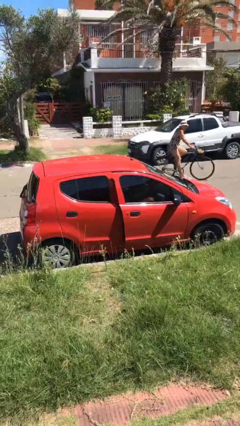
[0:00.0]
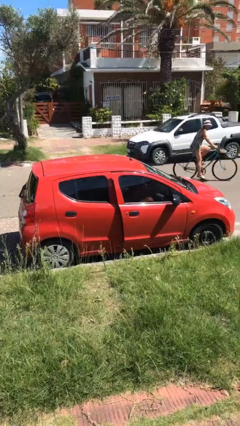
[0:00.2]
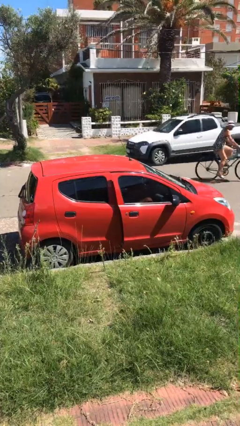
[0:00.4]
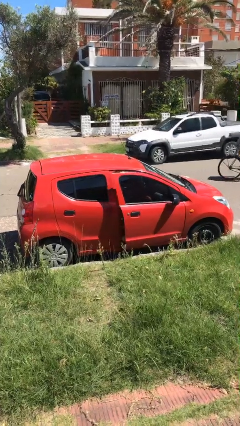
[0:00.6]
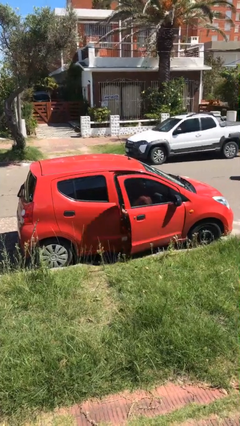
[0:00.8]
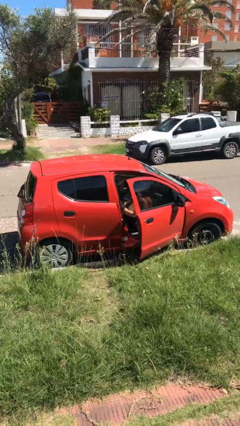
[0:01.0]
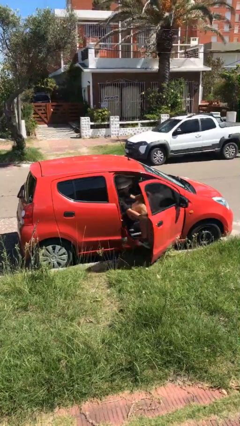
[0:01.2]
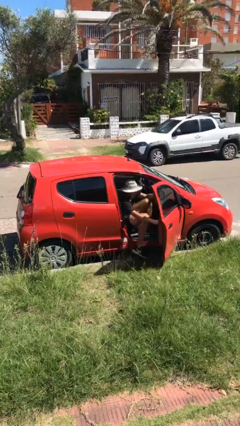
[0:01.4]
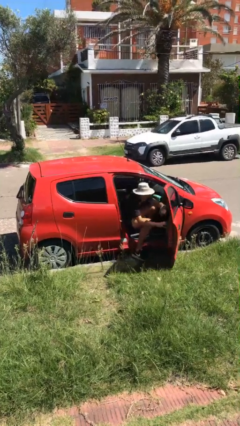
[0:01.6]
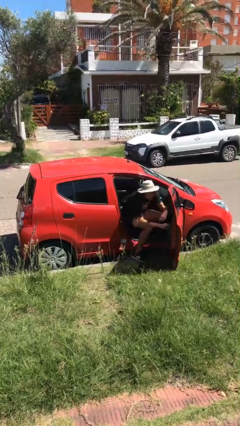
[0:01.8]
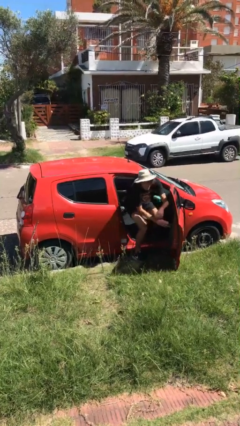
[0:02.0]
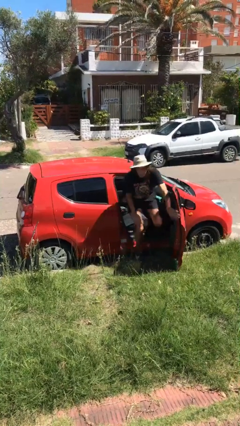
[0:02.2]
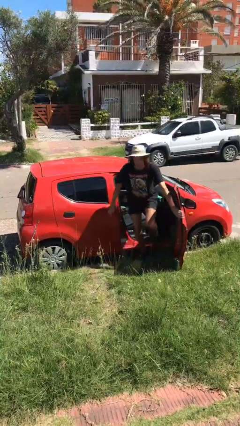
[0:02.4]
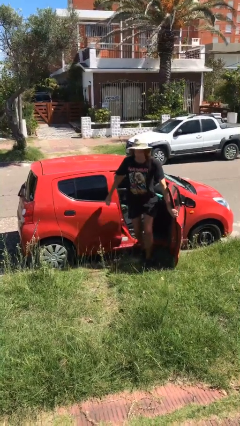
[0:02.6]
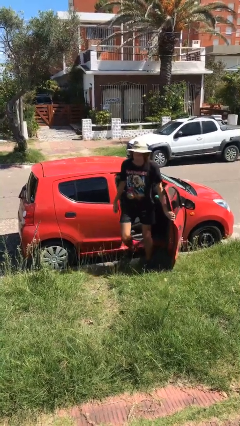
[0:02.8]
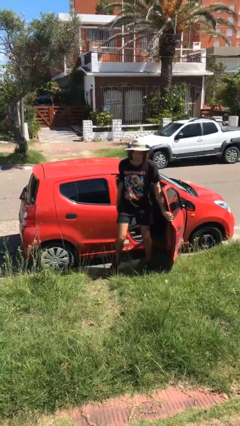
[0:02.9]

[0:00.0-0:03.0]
car drops off person

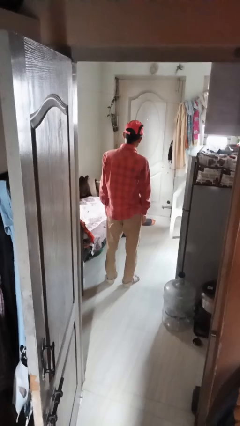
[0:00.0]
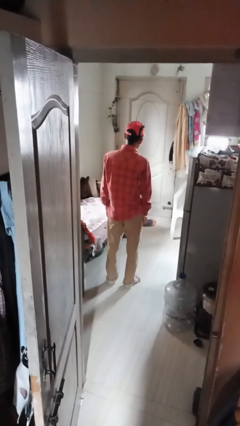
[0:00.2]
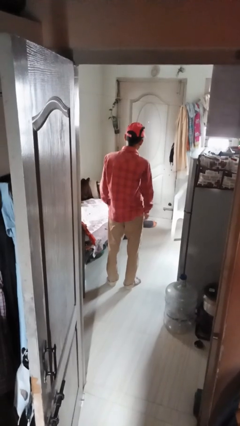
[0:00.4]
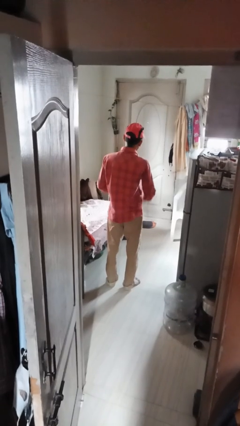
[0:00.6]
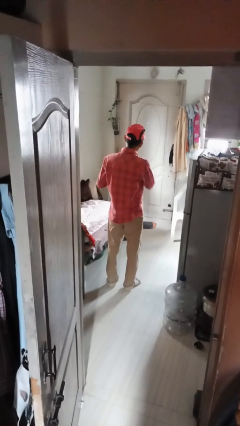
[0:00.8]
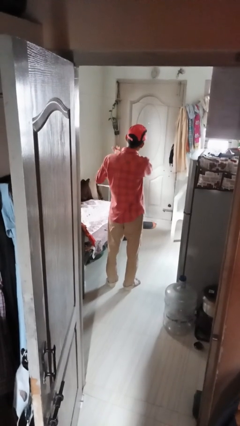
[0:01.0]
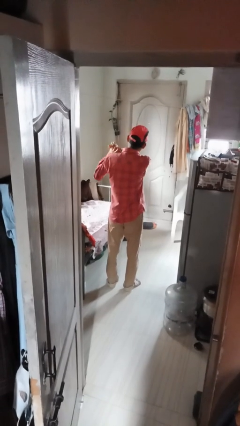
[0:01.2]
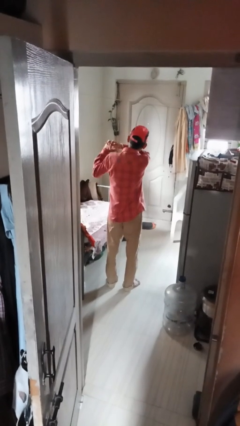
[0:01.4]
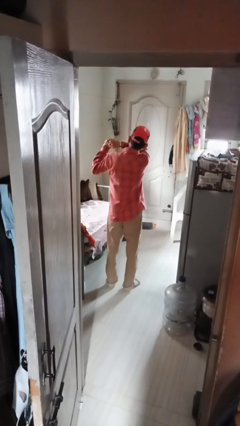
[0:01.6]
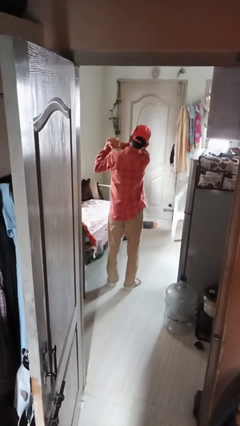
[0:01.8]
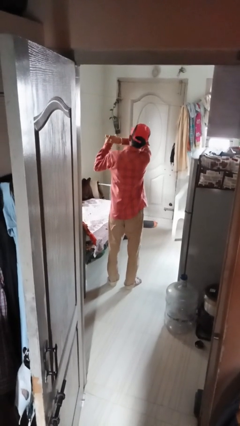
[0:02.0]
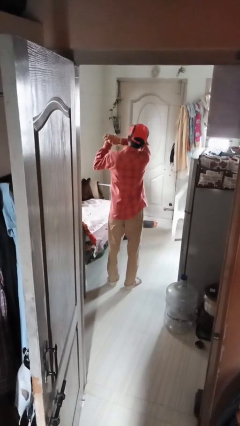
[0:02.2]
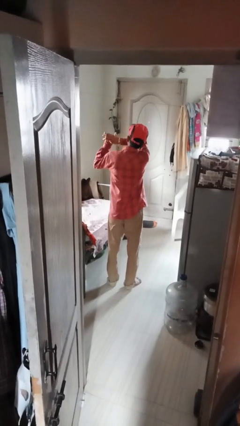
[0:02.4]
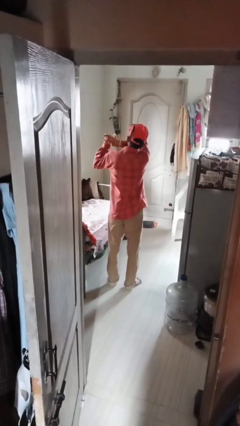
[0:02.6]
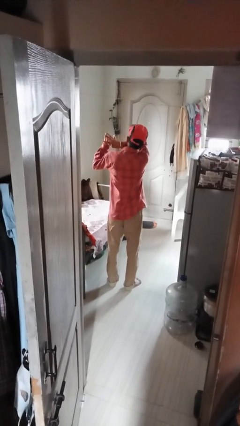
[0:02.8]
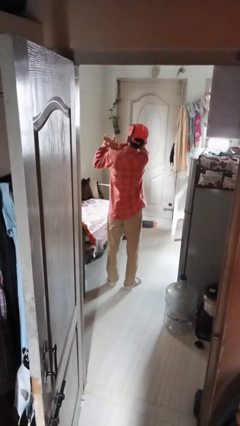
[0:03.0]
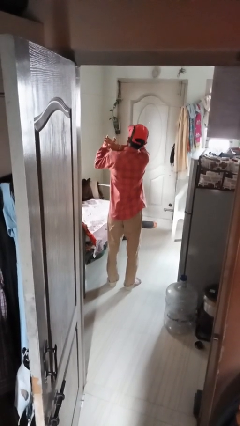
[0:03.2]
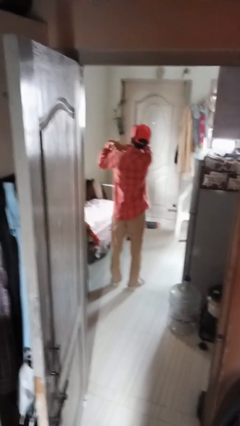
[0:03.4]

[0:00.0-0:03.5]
person cracks knuckles

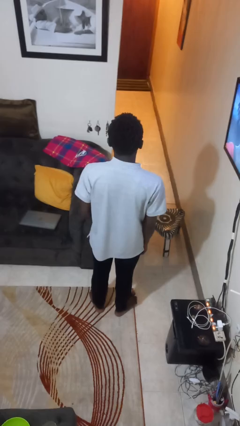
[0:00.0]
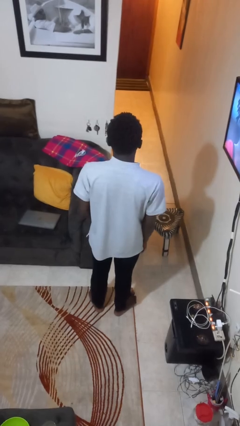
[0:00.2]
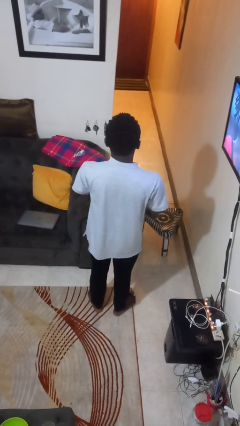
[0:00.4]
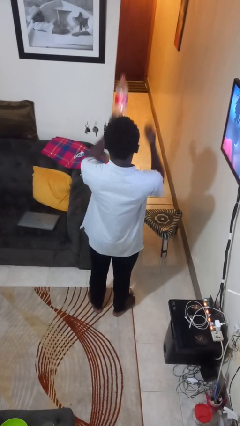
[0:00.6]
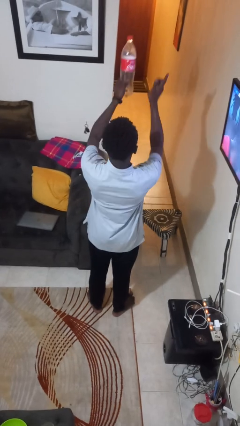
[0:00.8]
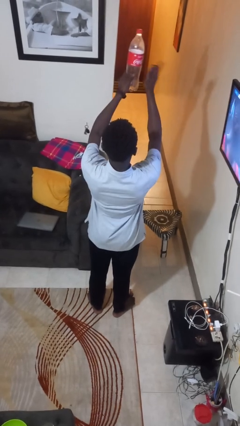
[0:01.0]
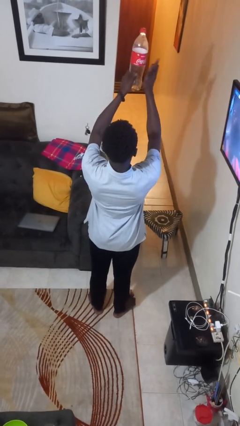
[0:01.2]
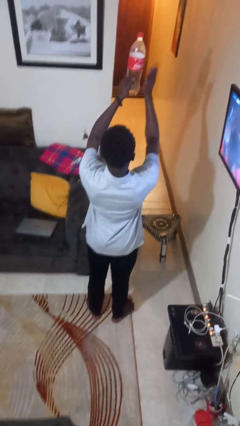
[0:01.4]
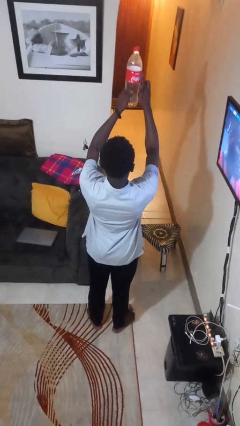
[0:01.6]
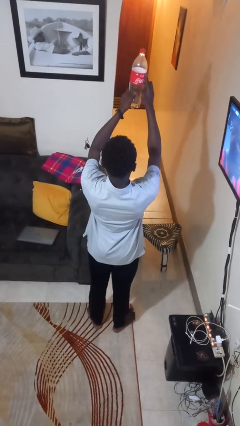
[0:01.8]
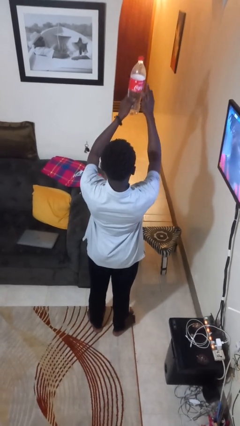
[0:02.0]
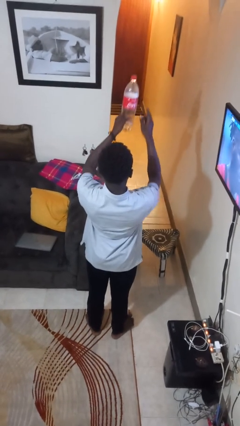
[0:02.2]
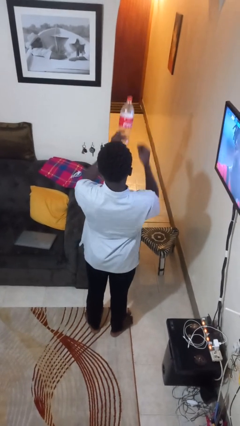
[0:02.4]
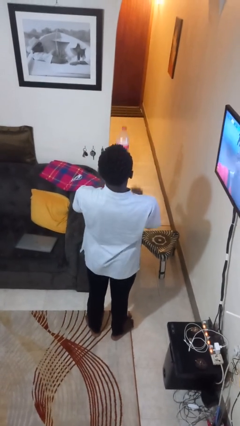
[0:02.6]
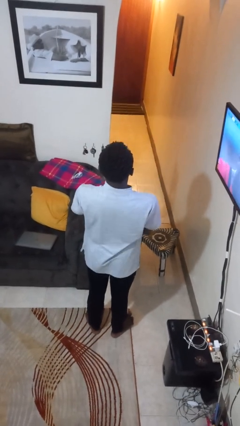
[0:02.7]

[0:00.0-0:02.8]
person taps object with finger

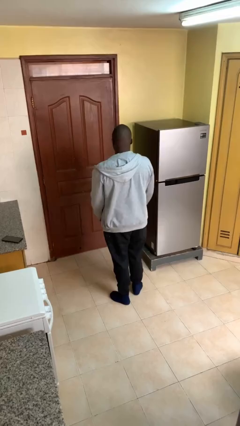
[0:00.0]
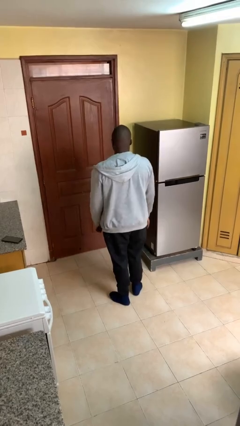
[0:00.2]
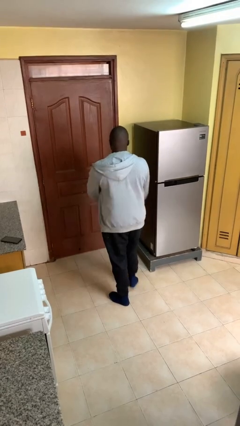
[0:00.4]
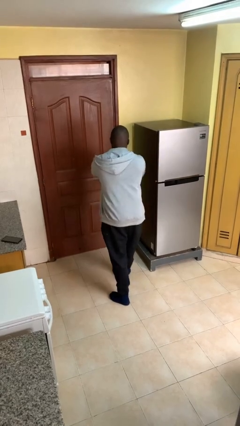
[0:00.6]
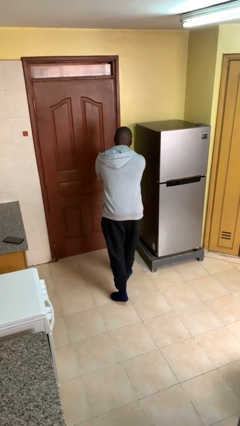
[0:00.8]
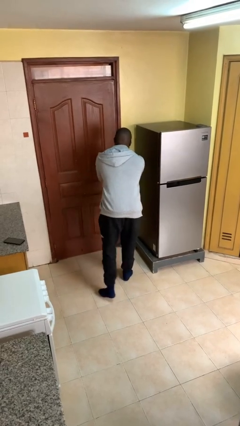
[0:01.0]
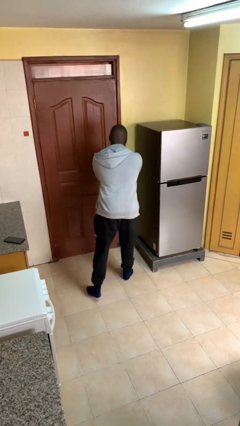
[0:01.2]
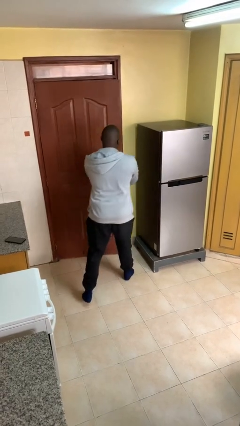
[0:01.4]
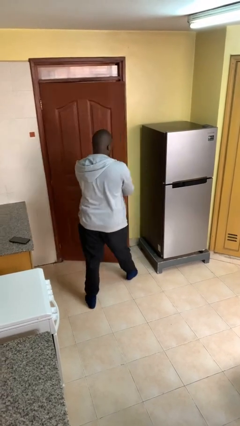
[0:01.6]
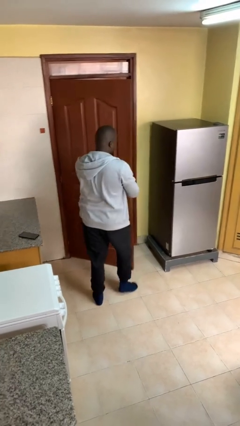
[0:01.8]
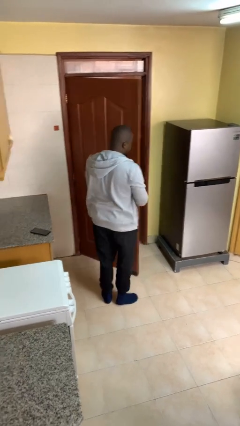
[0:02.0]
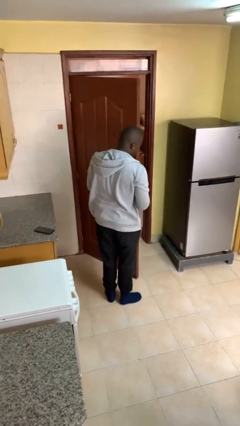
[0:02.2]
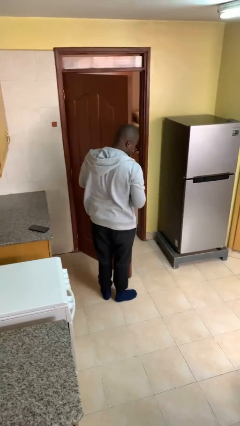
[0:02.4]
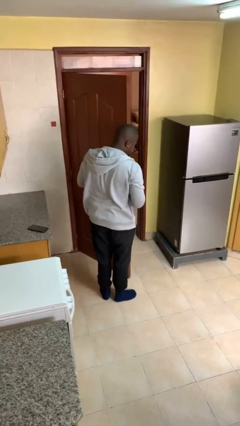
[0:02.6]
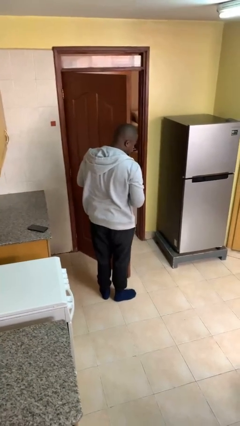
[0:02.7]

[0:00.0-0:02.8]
person opens facility door

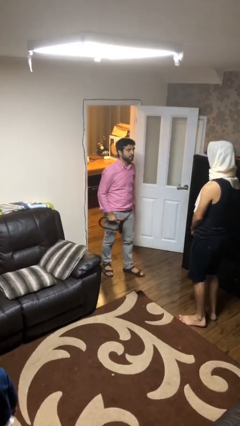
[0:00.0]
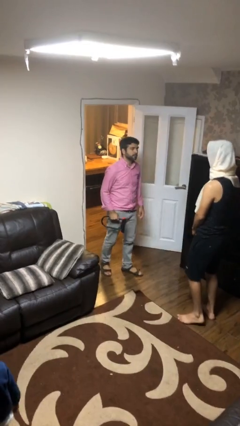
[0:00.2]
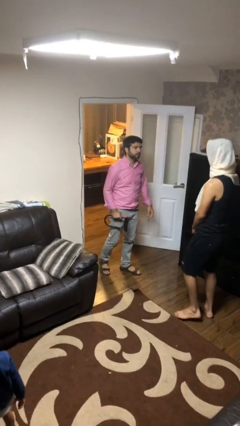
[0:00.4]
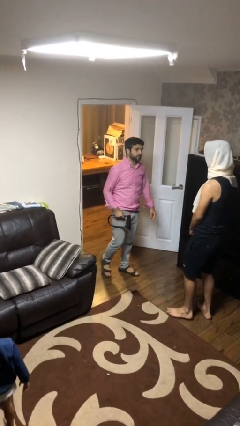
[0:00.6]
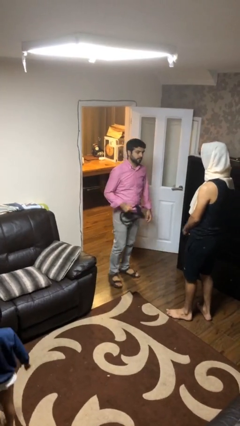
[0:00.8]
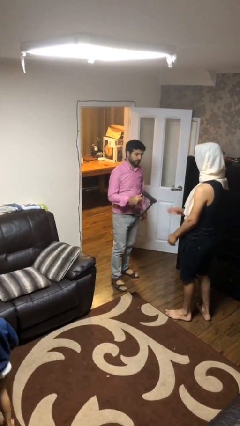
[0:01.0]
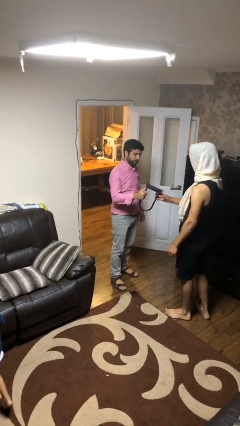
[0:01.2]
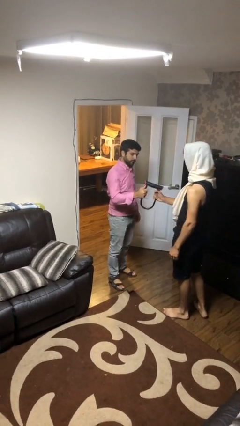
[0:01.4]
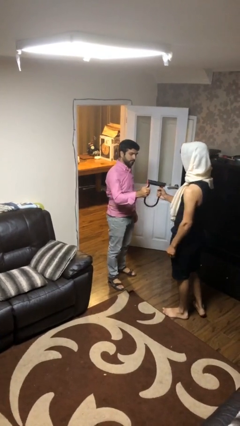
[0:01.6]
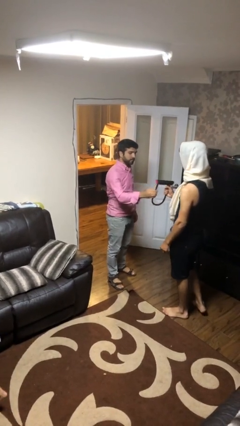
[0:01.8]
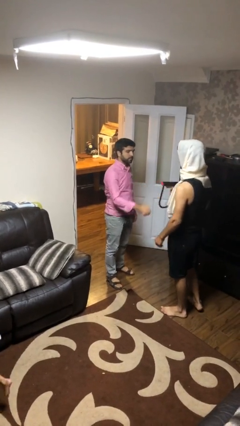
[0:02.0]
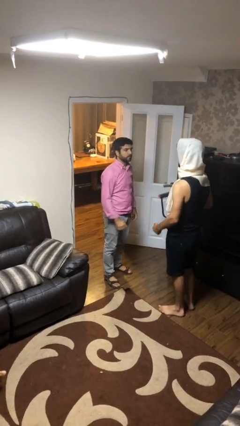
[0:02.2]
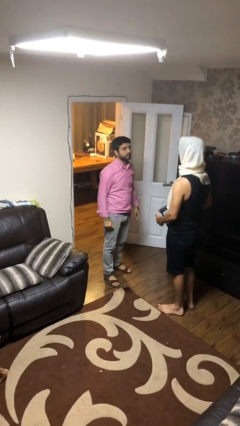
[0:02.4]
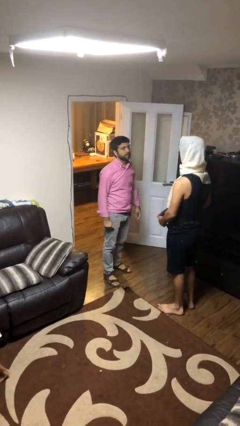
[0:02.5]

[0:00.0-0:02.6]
person transfers object to person

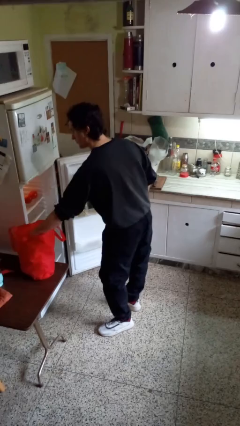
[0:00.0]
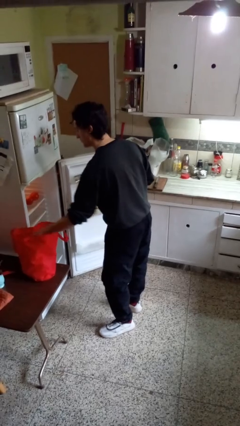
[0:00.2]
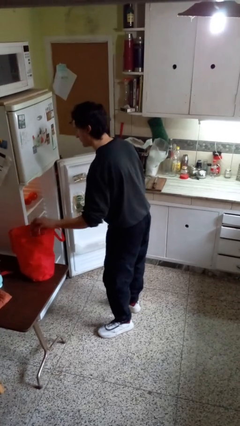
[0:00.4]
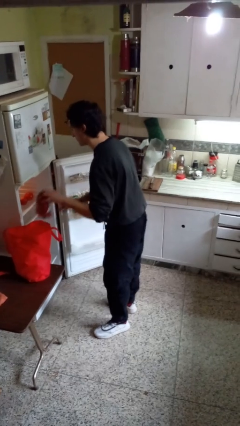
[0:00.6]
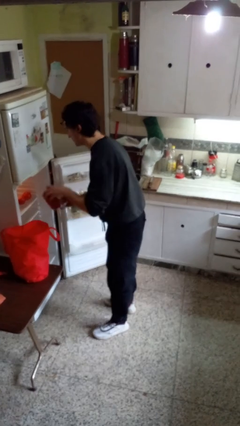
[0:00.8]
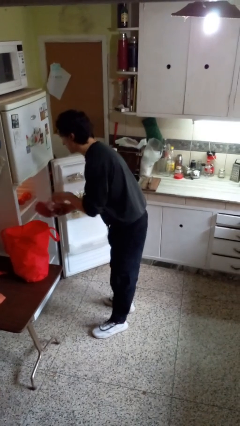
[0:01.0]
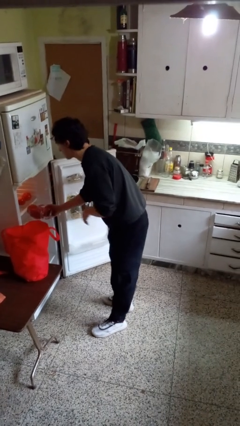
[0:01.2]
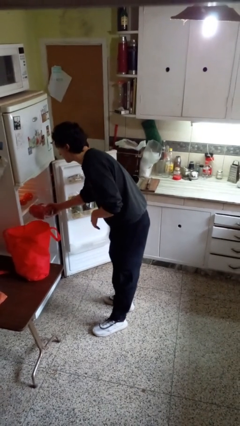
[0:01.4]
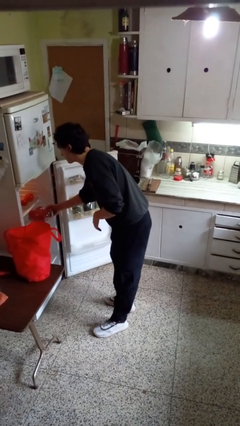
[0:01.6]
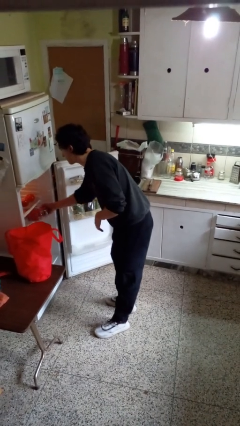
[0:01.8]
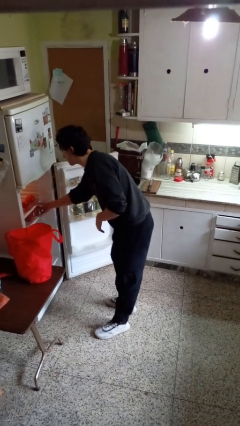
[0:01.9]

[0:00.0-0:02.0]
person loads groceries into refrigerator

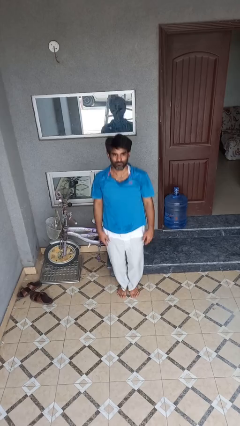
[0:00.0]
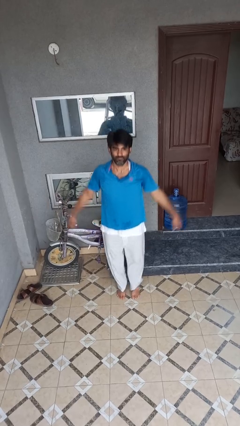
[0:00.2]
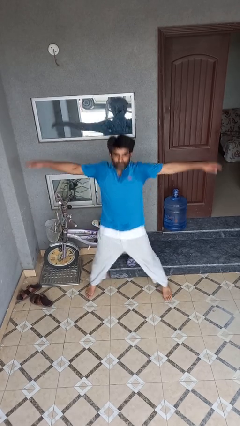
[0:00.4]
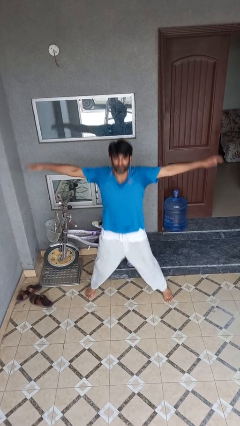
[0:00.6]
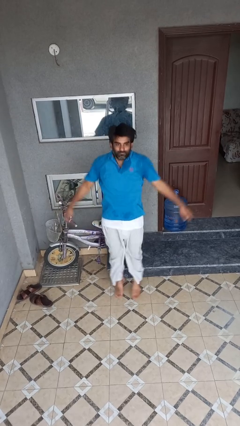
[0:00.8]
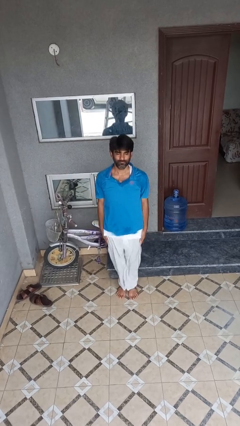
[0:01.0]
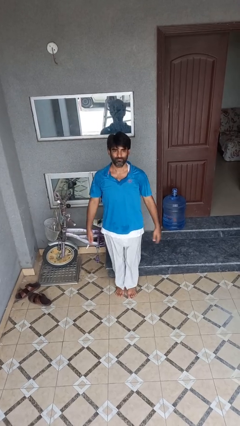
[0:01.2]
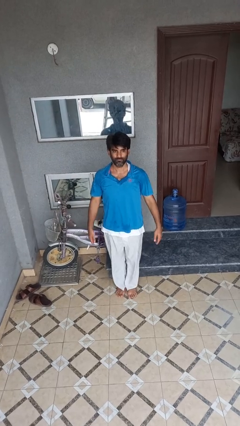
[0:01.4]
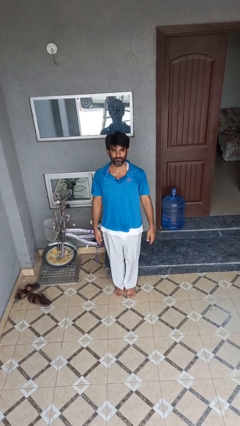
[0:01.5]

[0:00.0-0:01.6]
person exercises with jumping jacks
